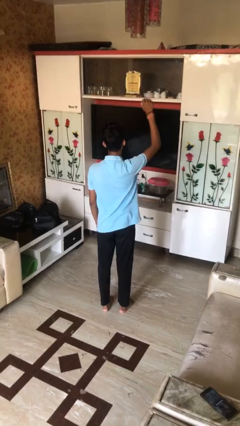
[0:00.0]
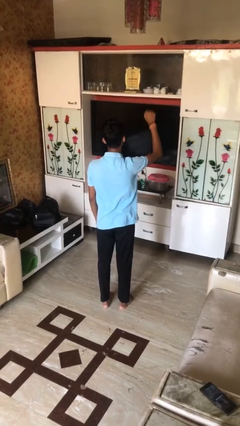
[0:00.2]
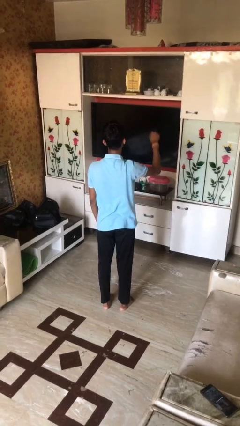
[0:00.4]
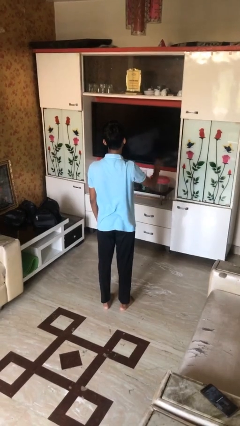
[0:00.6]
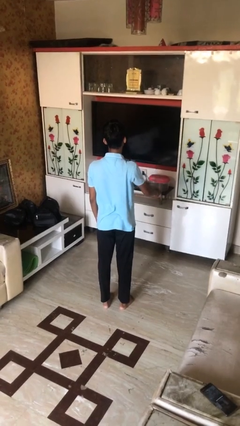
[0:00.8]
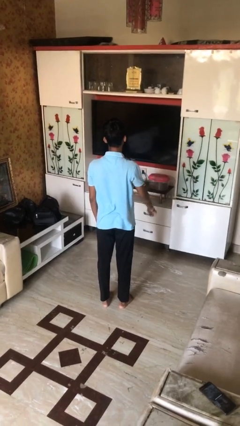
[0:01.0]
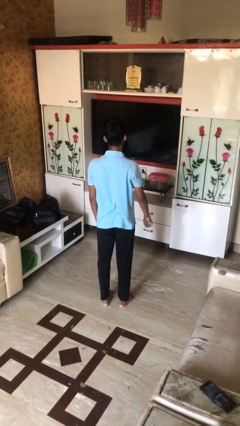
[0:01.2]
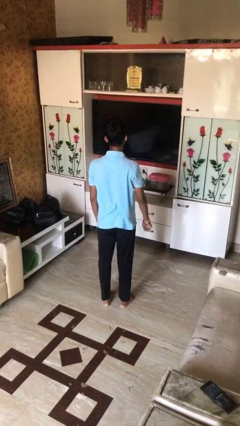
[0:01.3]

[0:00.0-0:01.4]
person gestures lower hand

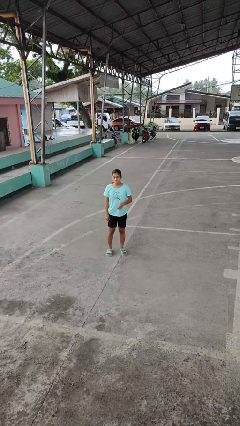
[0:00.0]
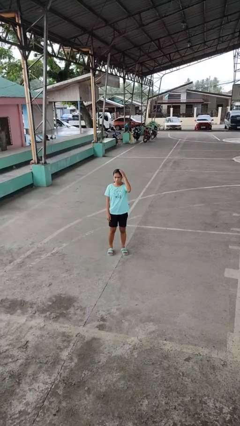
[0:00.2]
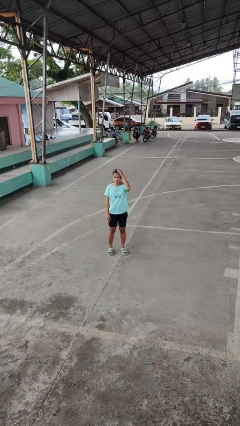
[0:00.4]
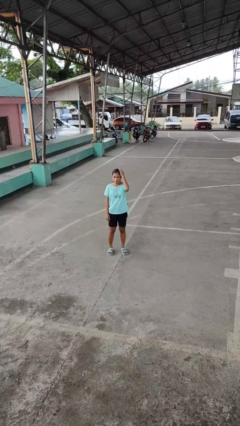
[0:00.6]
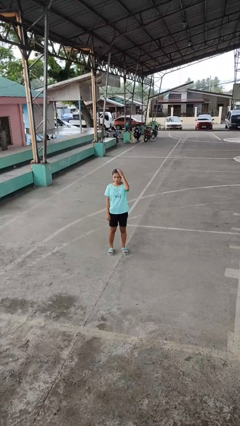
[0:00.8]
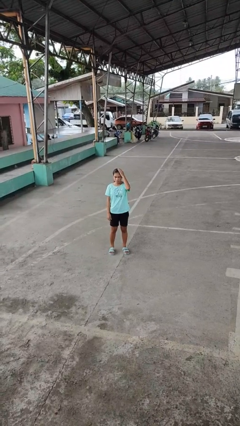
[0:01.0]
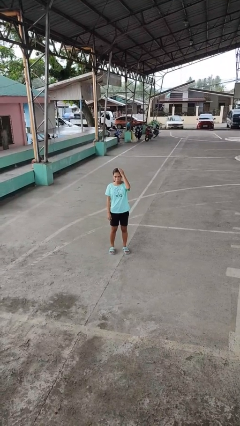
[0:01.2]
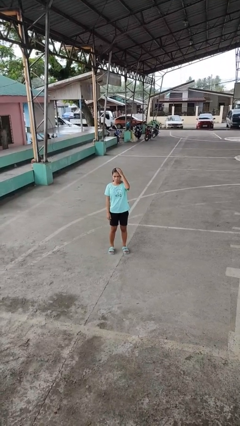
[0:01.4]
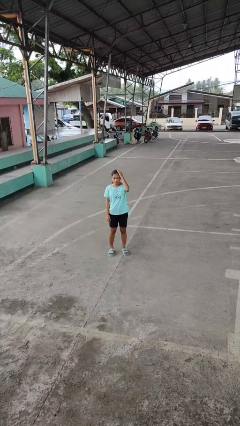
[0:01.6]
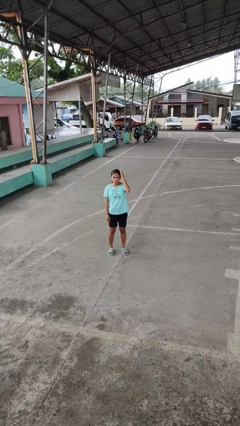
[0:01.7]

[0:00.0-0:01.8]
person pats head

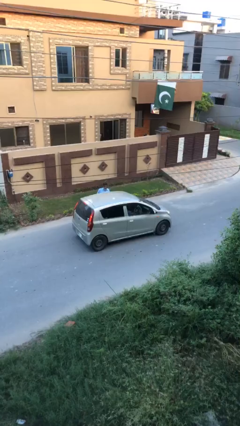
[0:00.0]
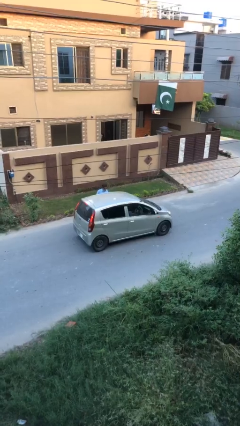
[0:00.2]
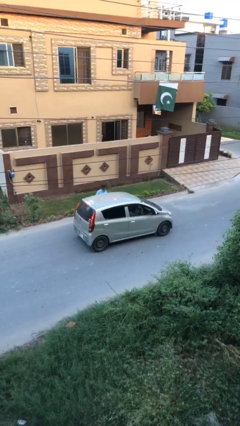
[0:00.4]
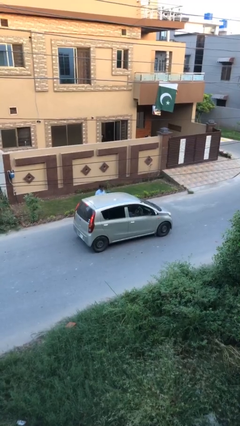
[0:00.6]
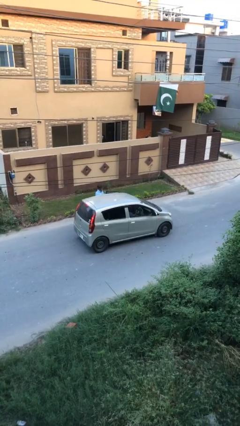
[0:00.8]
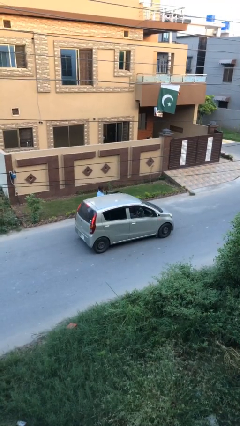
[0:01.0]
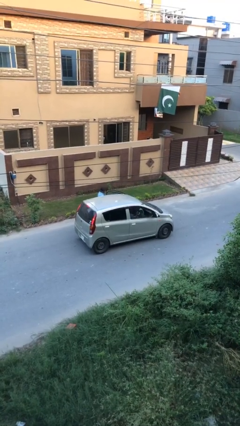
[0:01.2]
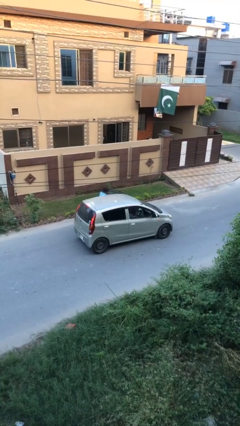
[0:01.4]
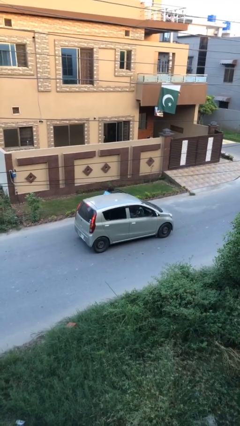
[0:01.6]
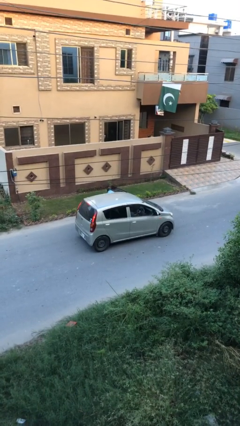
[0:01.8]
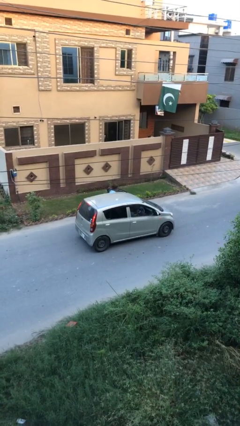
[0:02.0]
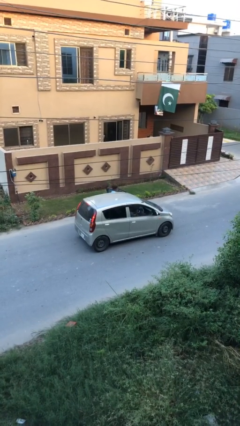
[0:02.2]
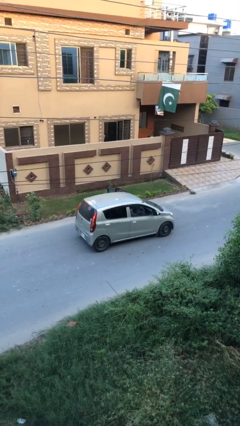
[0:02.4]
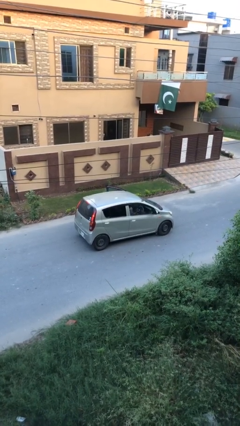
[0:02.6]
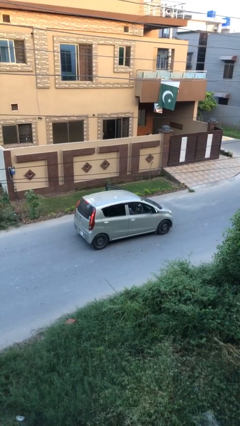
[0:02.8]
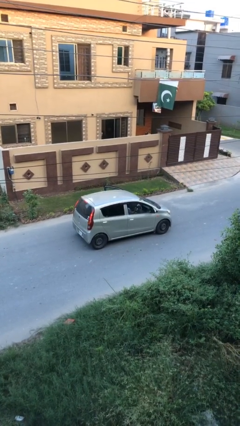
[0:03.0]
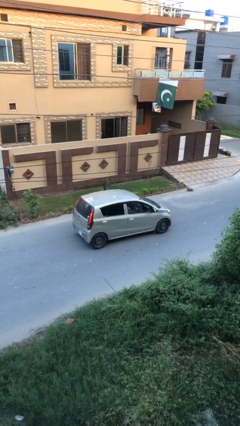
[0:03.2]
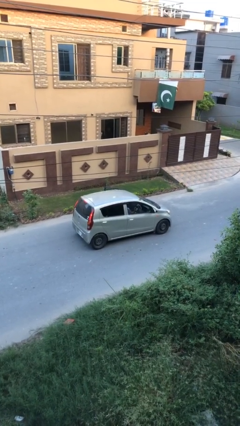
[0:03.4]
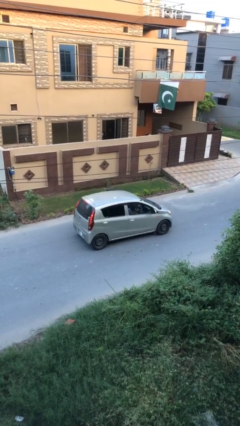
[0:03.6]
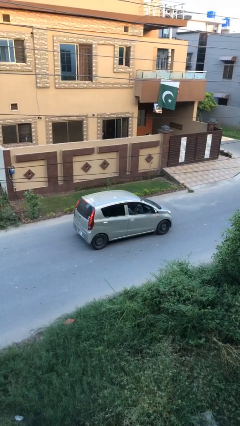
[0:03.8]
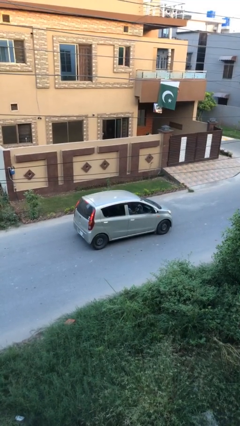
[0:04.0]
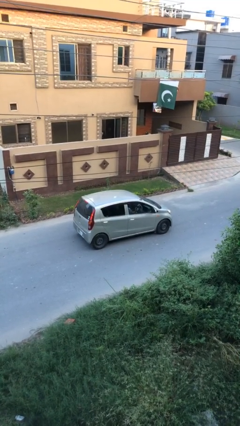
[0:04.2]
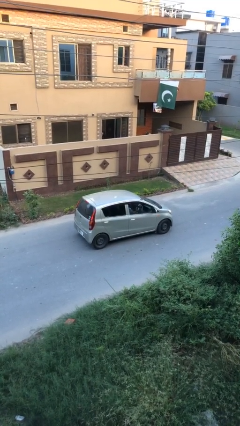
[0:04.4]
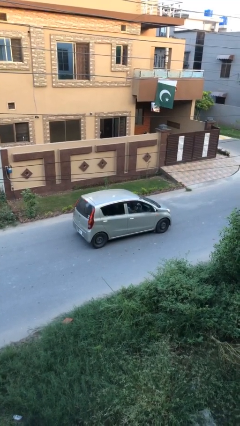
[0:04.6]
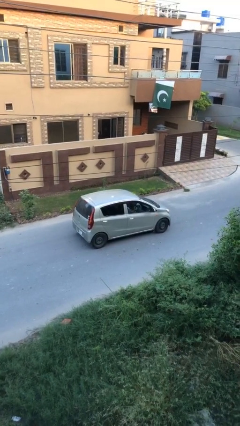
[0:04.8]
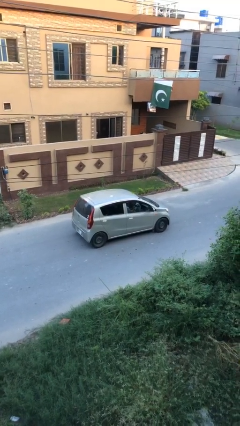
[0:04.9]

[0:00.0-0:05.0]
car picks up person

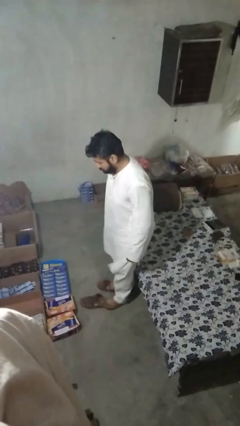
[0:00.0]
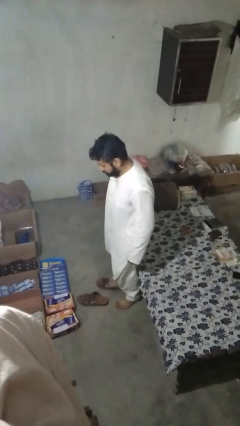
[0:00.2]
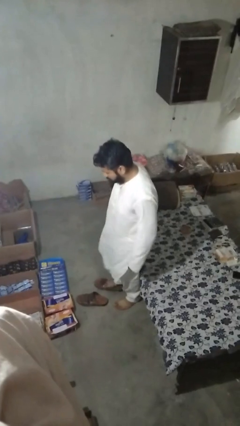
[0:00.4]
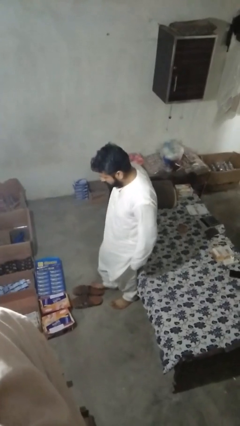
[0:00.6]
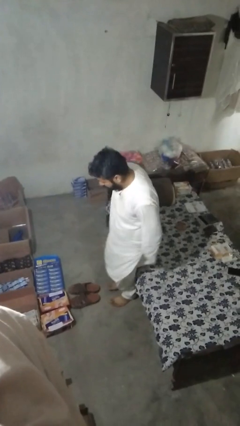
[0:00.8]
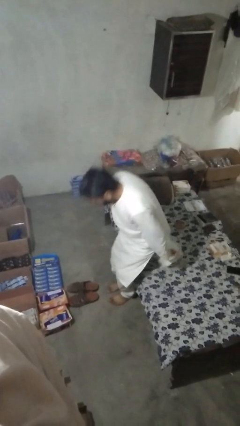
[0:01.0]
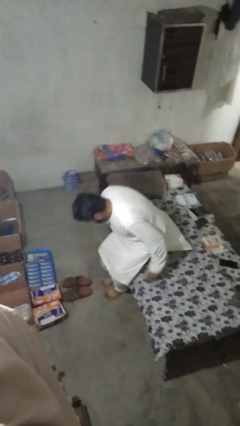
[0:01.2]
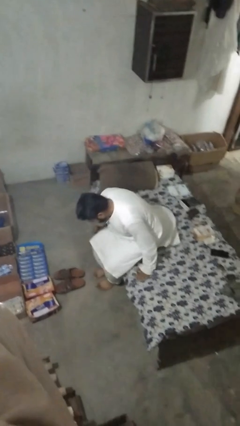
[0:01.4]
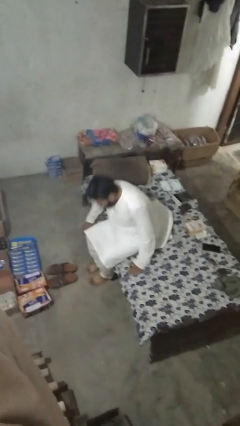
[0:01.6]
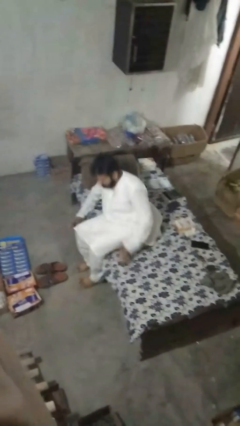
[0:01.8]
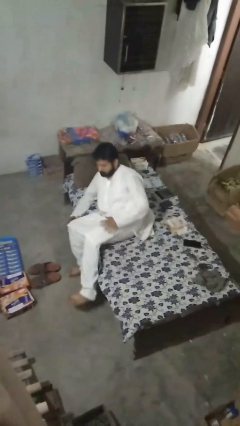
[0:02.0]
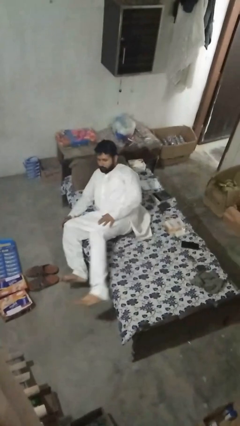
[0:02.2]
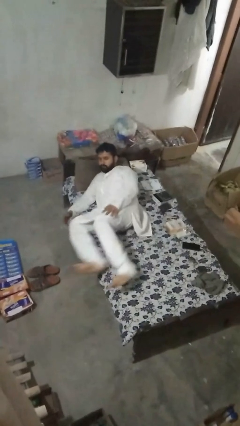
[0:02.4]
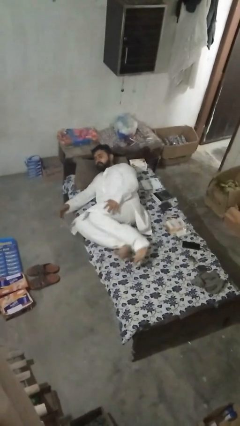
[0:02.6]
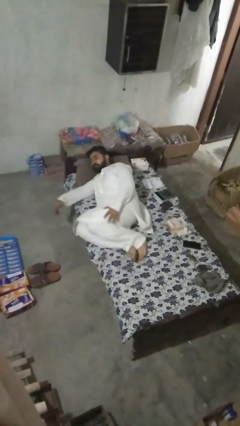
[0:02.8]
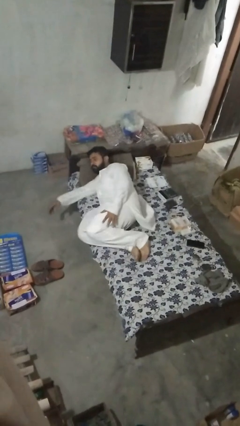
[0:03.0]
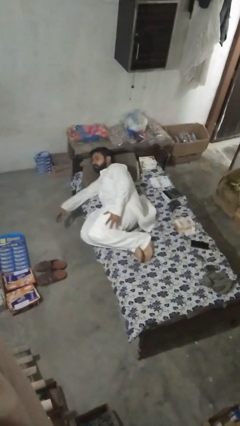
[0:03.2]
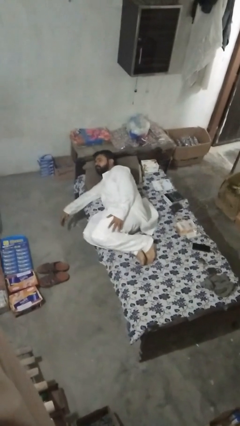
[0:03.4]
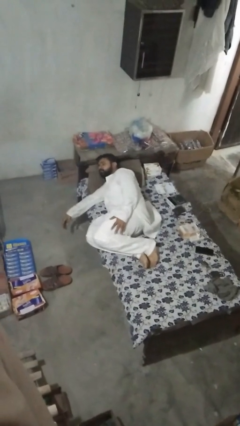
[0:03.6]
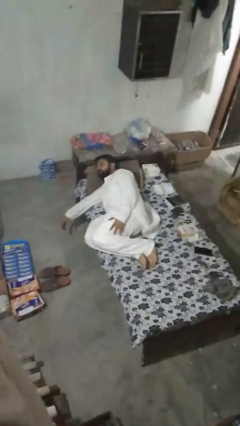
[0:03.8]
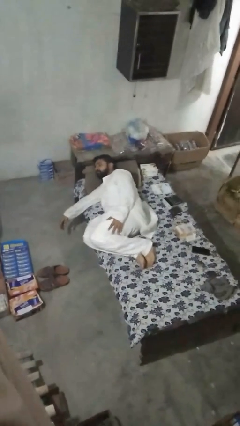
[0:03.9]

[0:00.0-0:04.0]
person lies down on bed

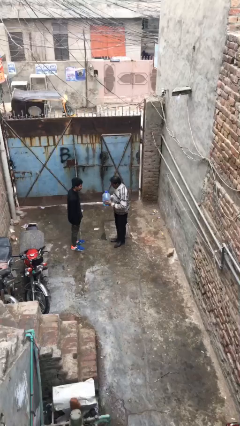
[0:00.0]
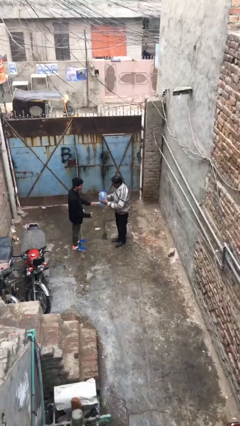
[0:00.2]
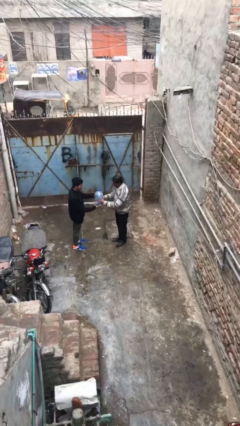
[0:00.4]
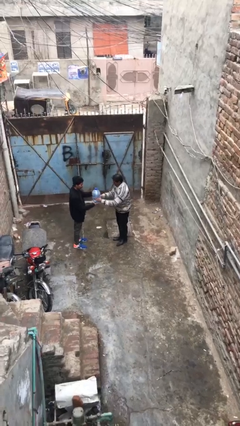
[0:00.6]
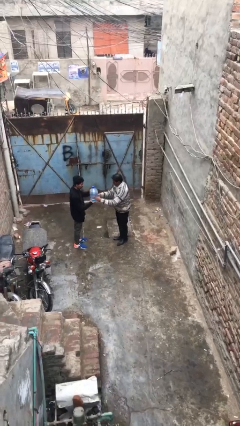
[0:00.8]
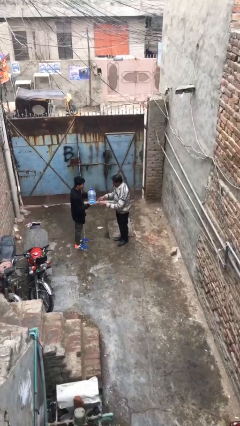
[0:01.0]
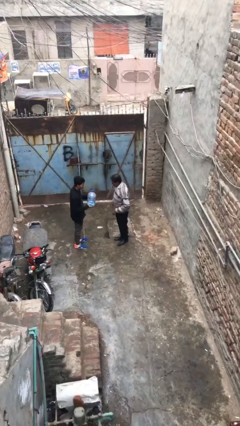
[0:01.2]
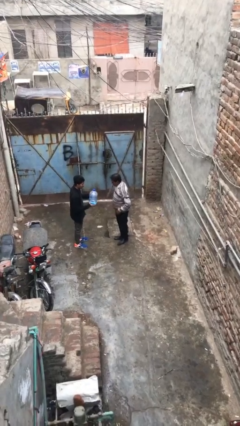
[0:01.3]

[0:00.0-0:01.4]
person transfers object to person

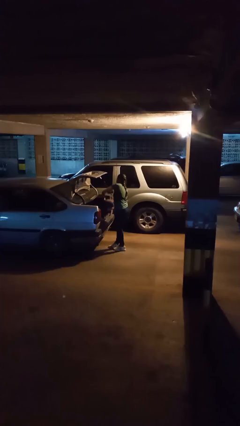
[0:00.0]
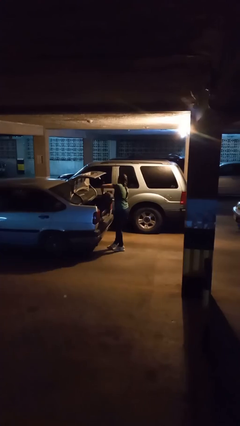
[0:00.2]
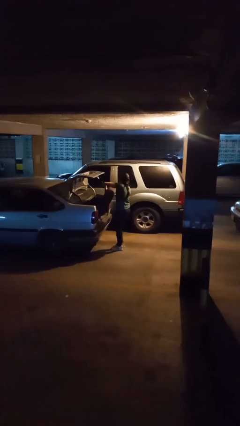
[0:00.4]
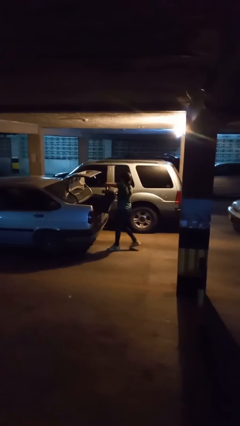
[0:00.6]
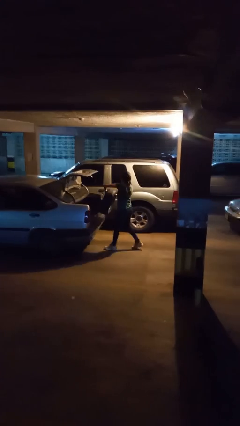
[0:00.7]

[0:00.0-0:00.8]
person unloads car

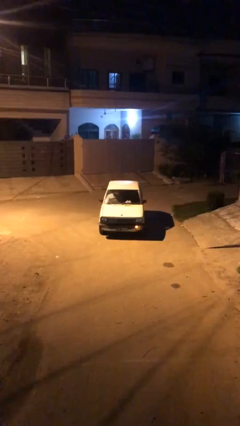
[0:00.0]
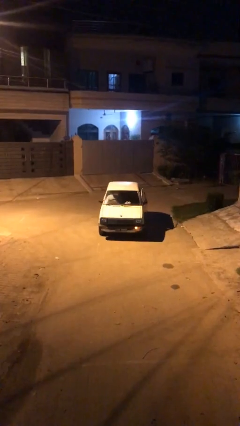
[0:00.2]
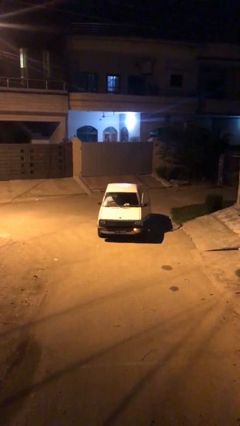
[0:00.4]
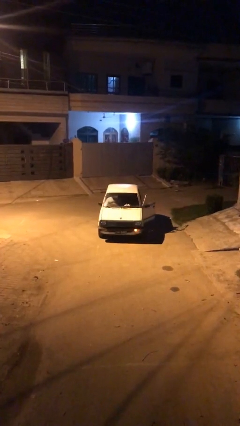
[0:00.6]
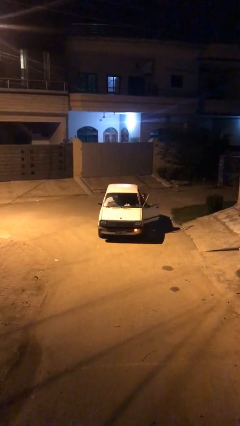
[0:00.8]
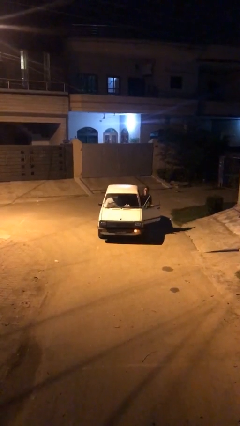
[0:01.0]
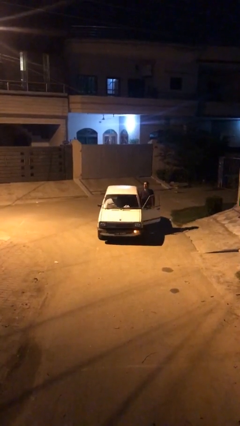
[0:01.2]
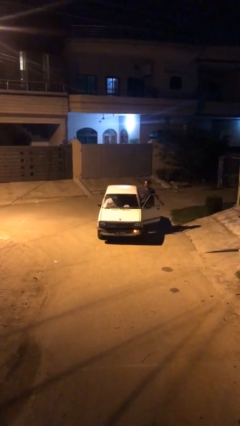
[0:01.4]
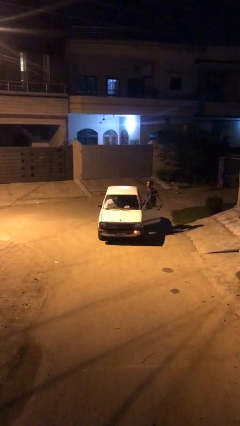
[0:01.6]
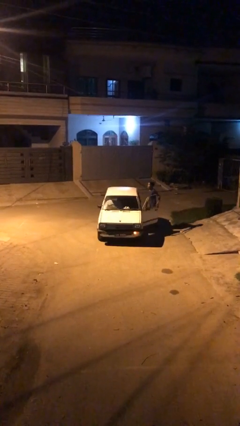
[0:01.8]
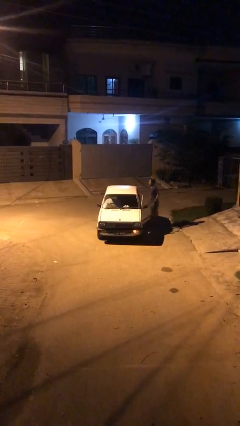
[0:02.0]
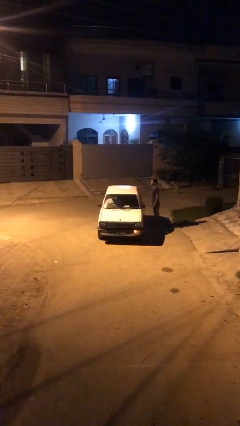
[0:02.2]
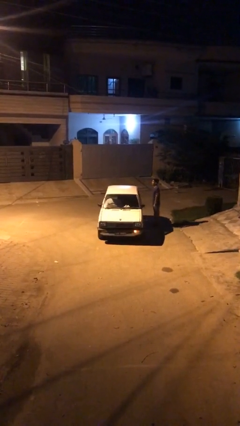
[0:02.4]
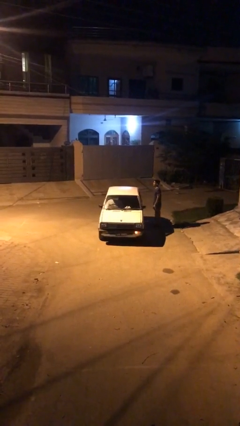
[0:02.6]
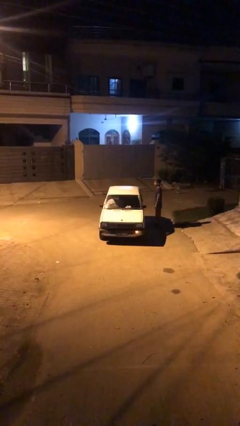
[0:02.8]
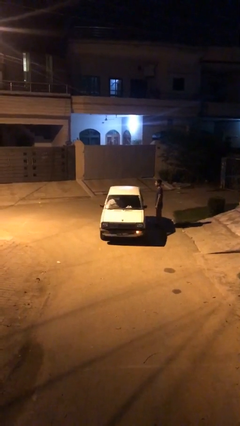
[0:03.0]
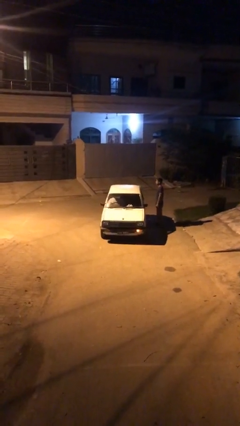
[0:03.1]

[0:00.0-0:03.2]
car drops off person
